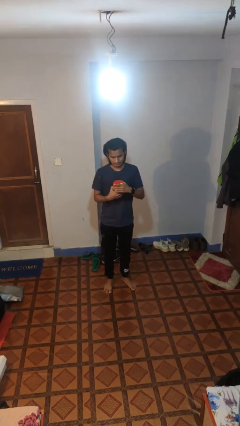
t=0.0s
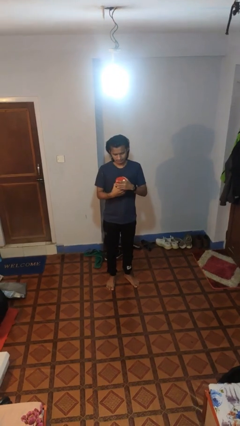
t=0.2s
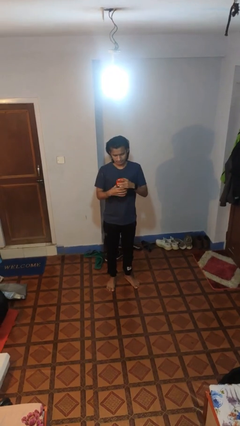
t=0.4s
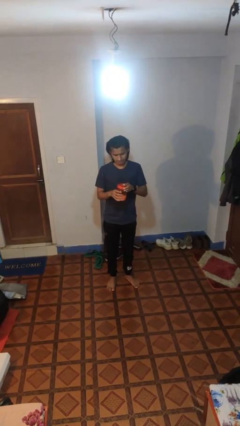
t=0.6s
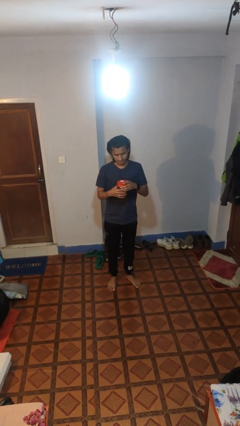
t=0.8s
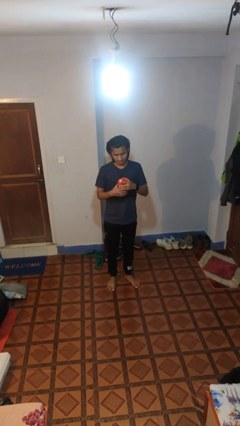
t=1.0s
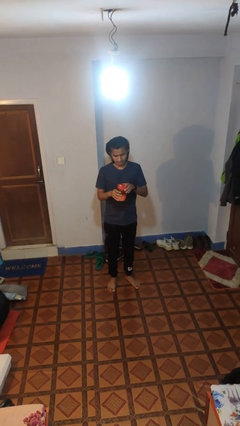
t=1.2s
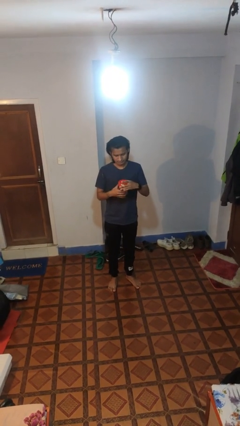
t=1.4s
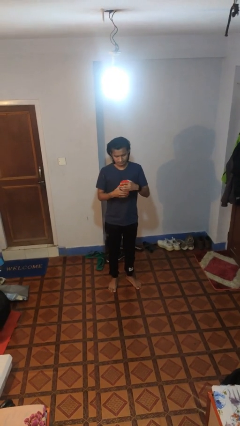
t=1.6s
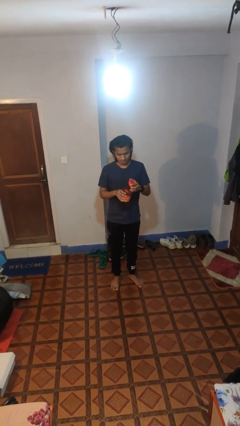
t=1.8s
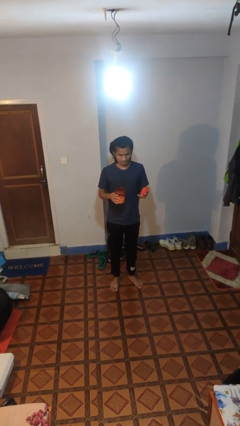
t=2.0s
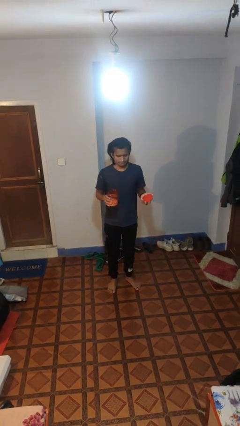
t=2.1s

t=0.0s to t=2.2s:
person opens jar

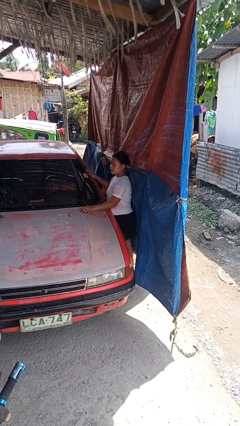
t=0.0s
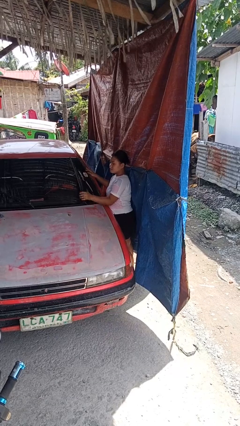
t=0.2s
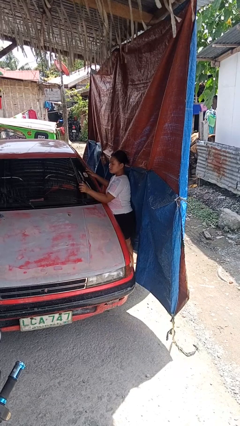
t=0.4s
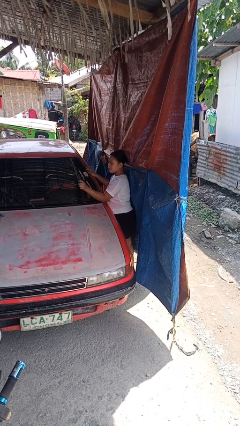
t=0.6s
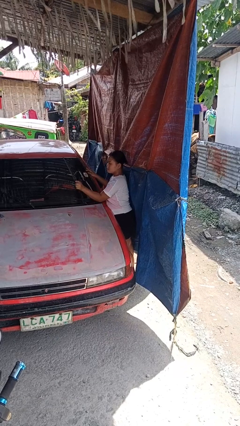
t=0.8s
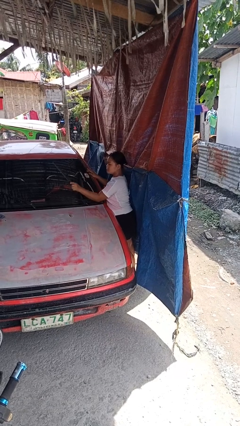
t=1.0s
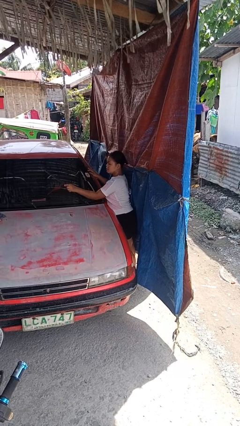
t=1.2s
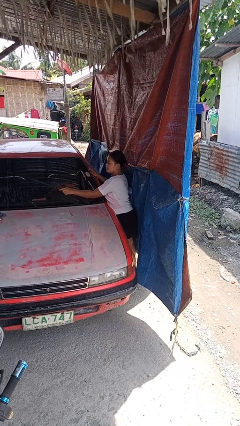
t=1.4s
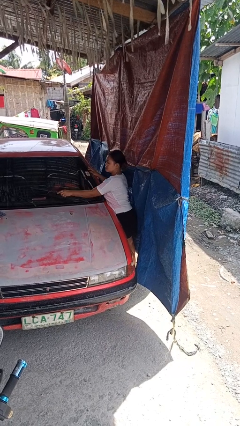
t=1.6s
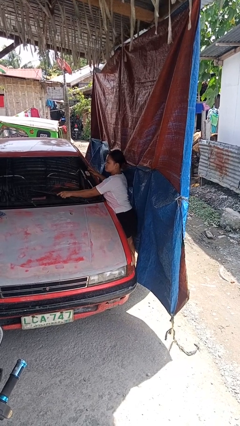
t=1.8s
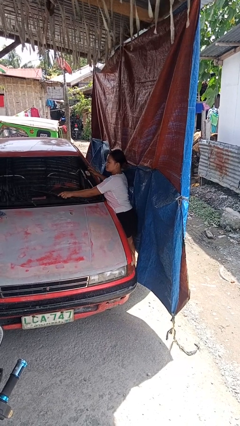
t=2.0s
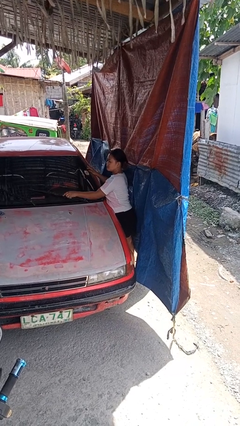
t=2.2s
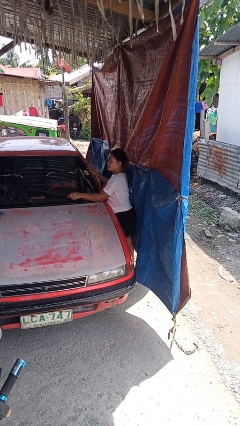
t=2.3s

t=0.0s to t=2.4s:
person flips down car wipers

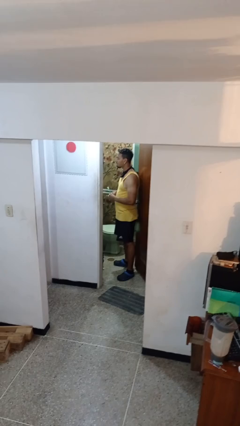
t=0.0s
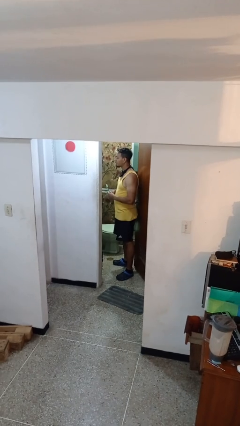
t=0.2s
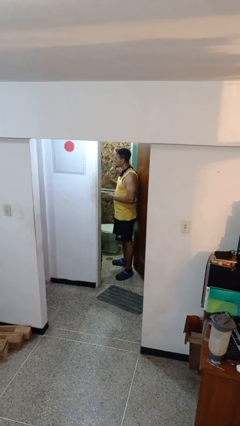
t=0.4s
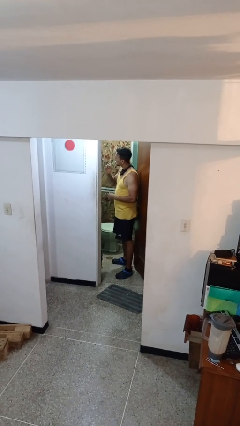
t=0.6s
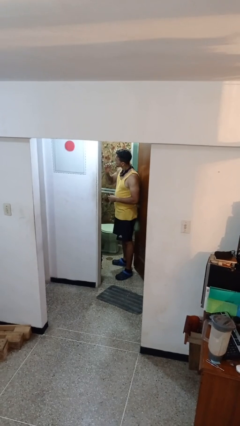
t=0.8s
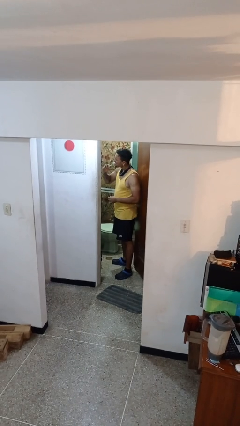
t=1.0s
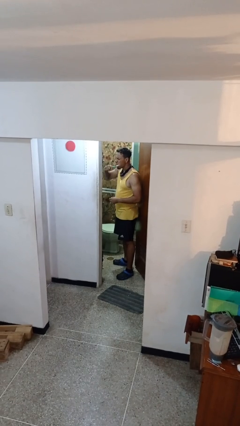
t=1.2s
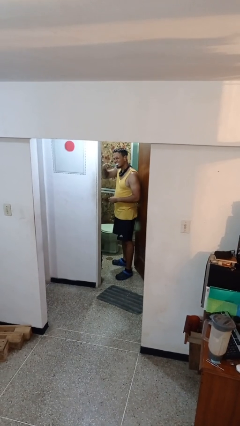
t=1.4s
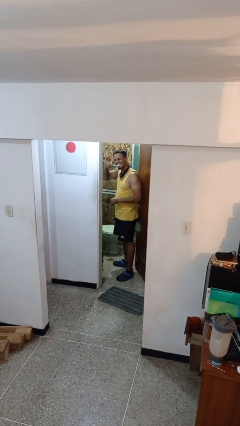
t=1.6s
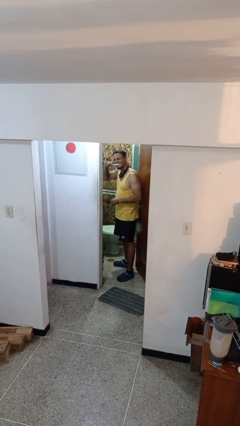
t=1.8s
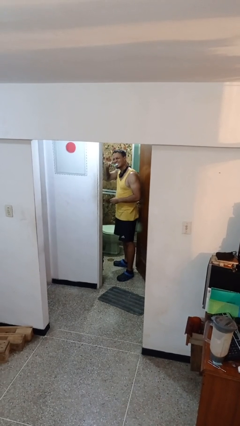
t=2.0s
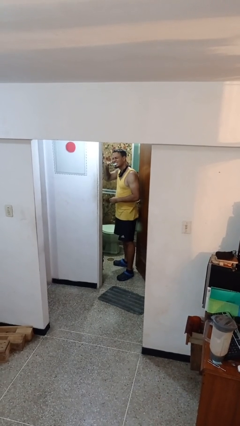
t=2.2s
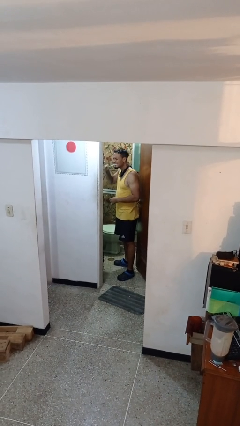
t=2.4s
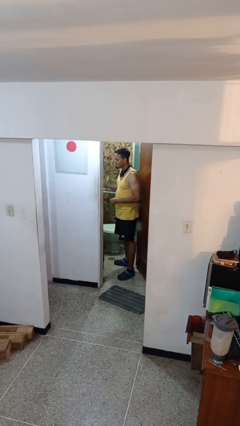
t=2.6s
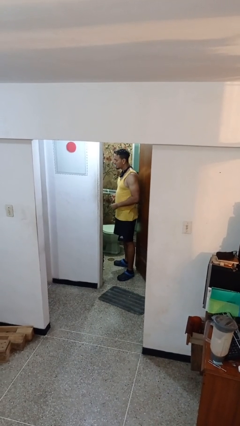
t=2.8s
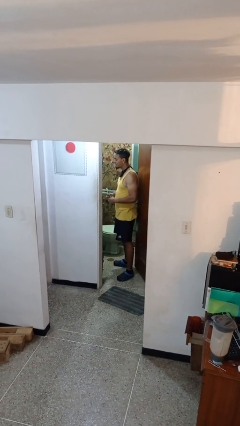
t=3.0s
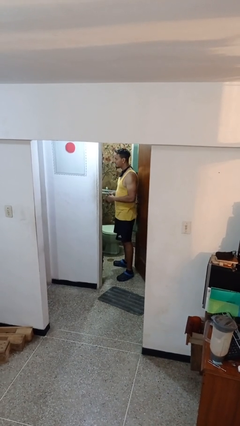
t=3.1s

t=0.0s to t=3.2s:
person brushes teeth

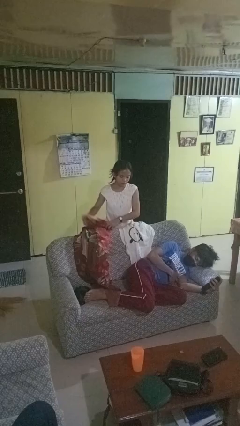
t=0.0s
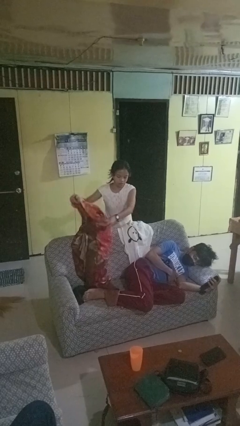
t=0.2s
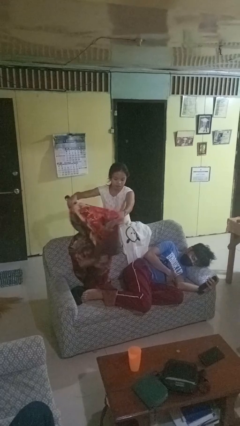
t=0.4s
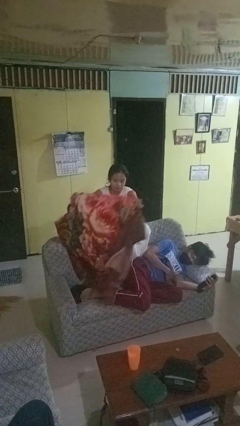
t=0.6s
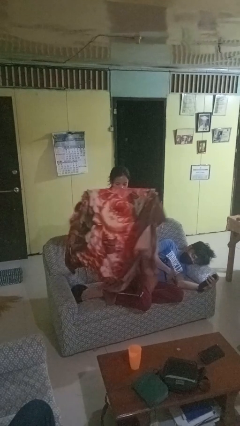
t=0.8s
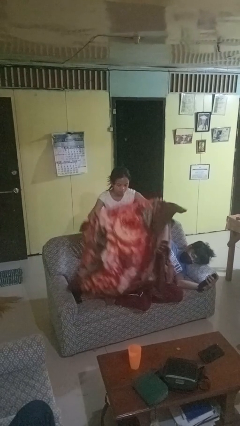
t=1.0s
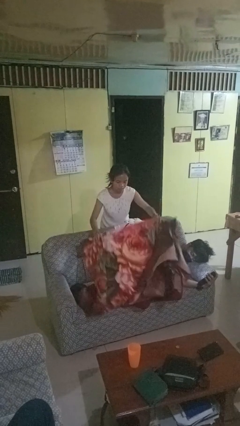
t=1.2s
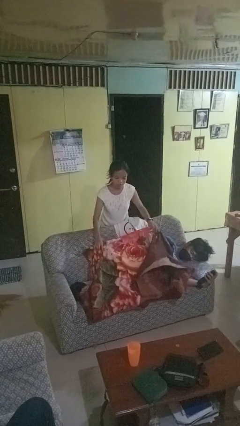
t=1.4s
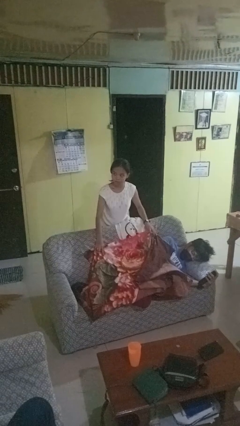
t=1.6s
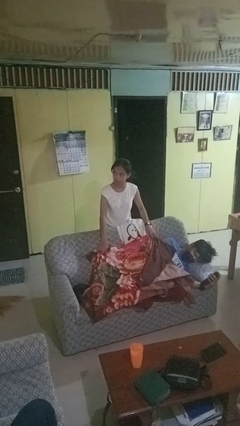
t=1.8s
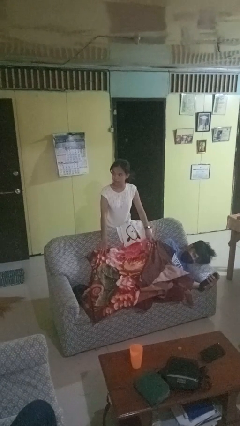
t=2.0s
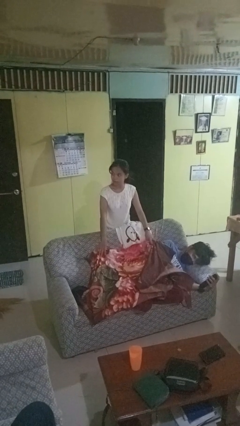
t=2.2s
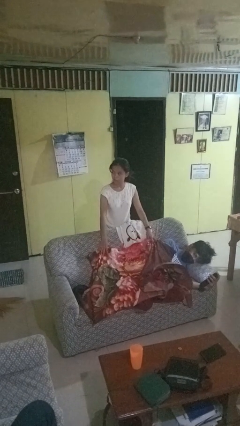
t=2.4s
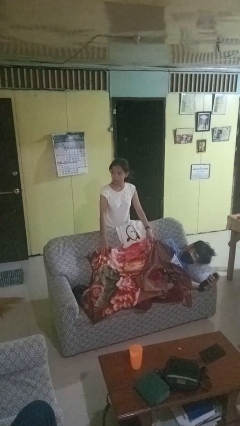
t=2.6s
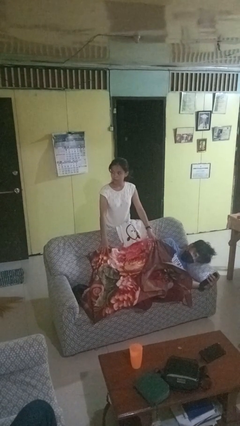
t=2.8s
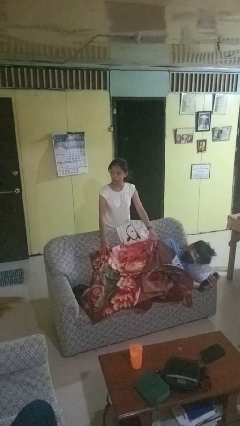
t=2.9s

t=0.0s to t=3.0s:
person covers friend with blanket

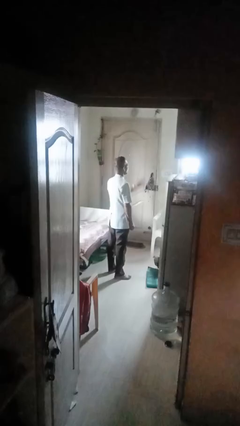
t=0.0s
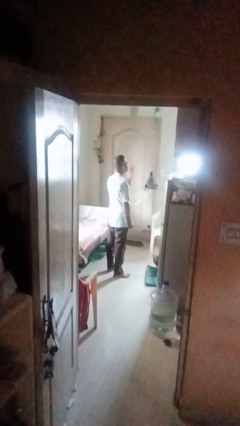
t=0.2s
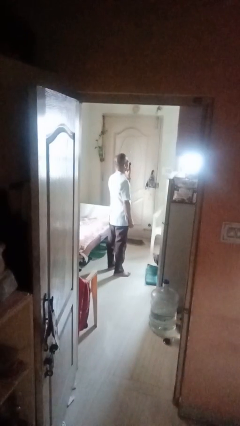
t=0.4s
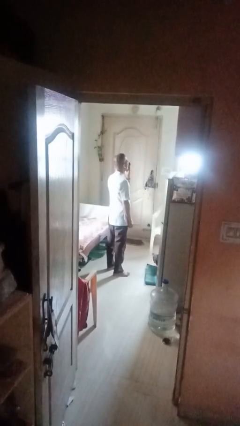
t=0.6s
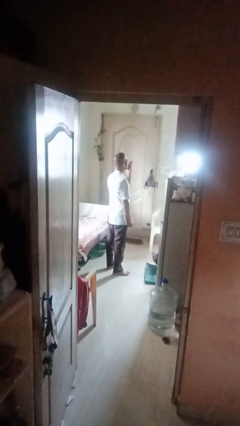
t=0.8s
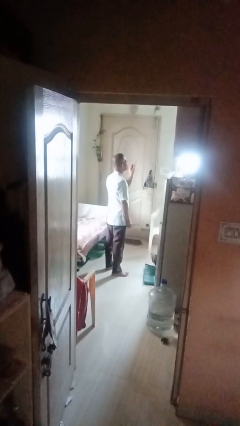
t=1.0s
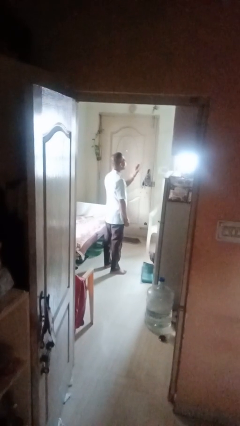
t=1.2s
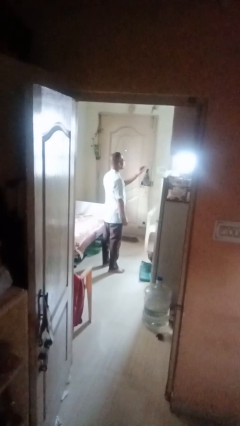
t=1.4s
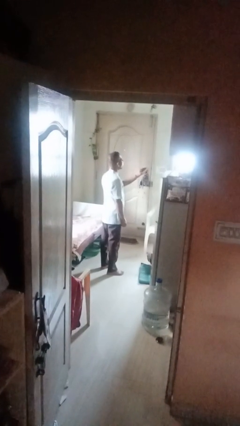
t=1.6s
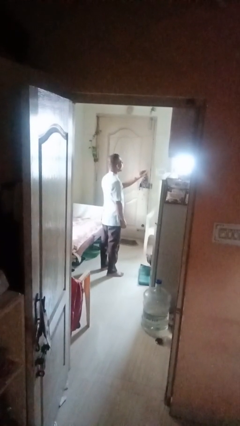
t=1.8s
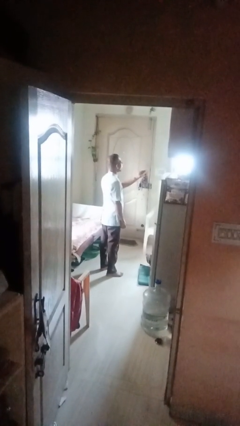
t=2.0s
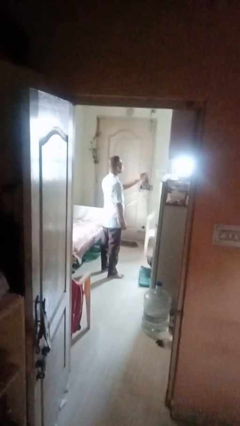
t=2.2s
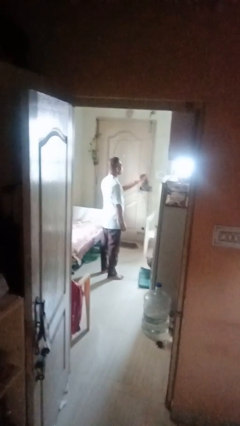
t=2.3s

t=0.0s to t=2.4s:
person gestures blow kiss

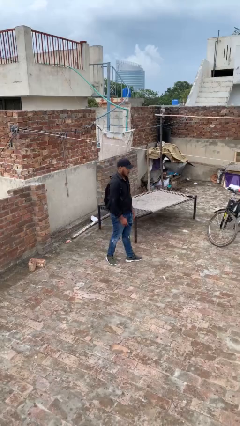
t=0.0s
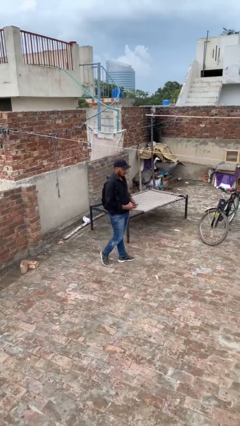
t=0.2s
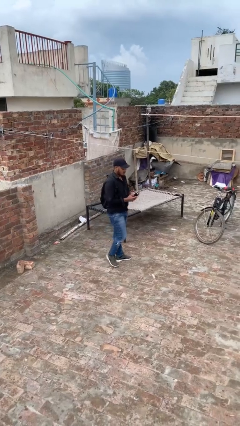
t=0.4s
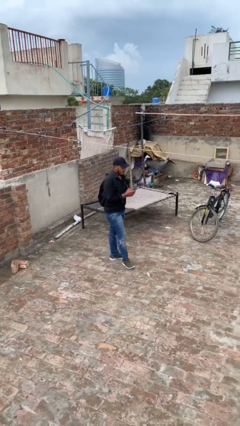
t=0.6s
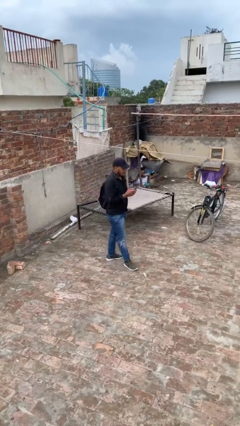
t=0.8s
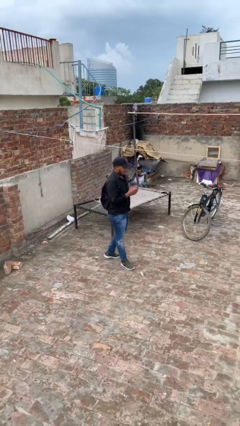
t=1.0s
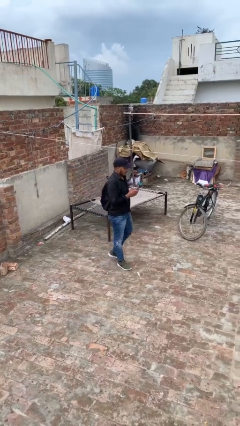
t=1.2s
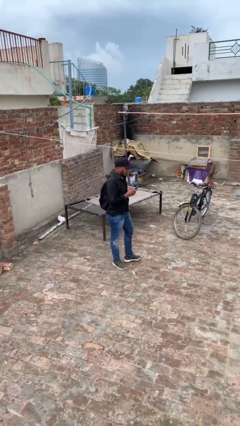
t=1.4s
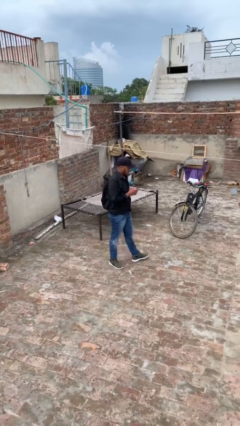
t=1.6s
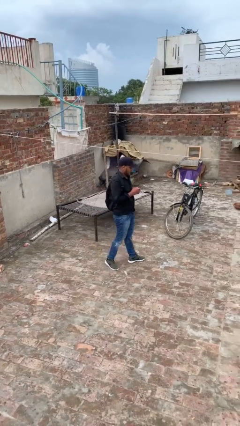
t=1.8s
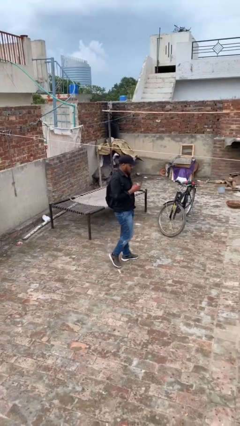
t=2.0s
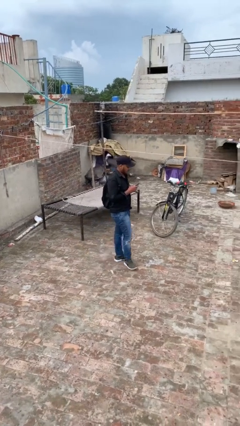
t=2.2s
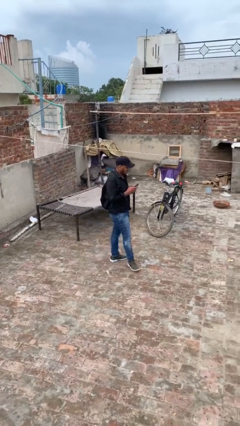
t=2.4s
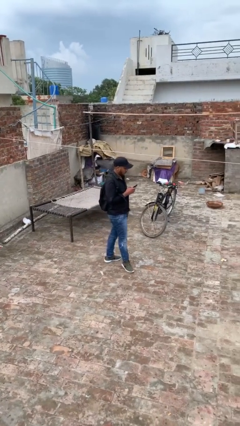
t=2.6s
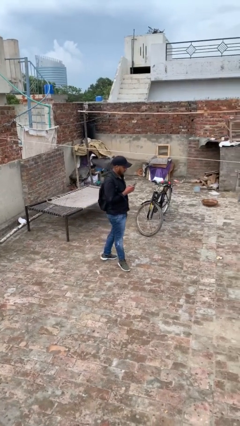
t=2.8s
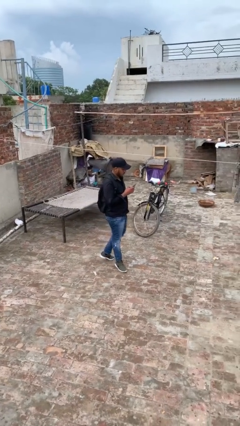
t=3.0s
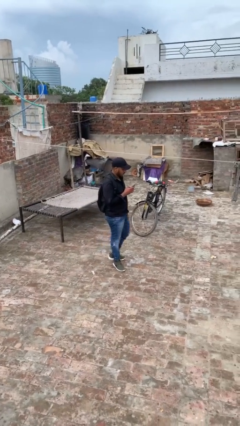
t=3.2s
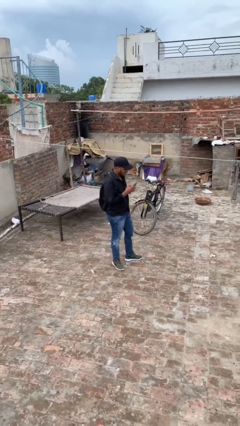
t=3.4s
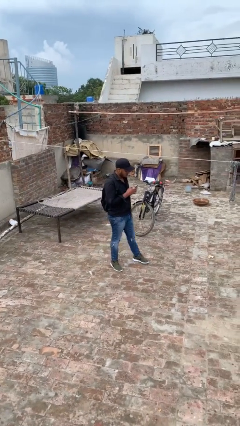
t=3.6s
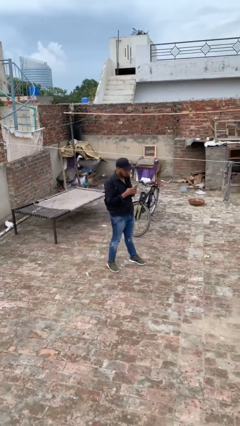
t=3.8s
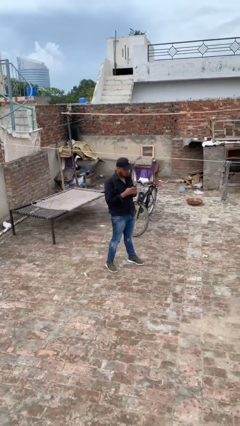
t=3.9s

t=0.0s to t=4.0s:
person texts on phone
